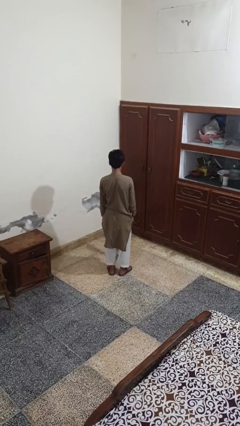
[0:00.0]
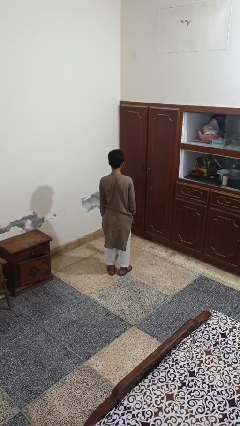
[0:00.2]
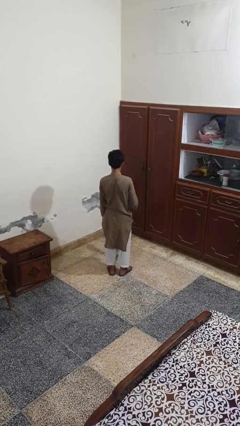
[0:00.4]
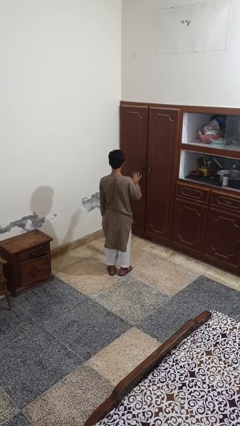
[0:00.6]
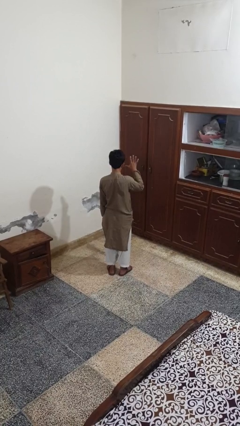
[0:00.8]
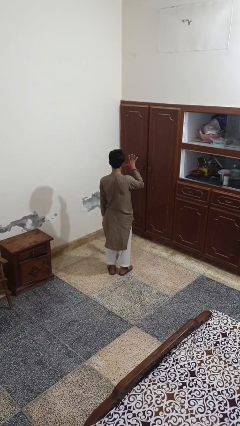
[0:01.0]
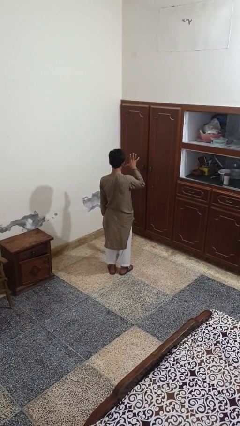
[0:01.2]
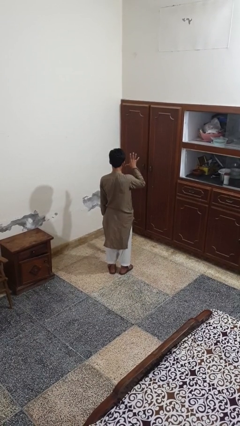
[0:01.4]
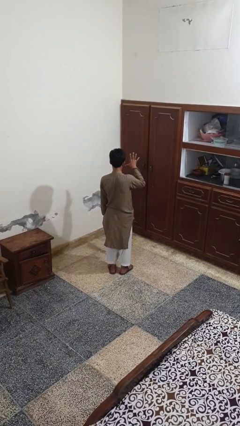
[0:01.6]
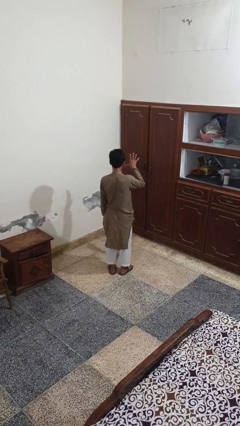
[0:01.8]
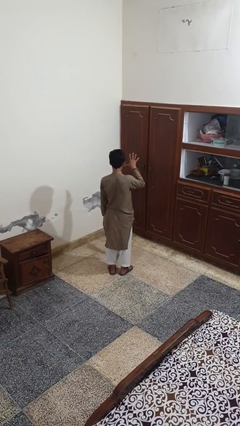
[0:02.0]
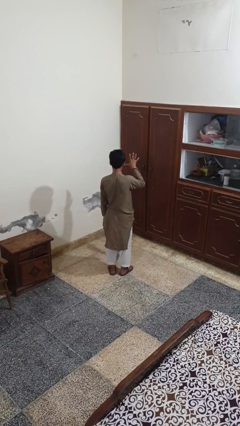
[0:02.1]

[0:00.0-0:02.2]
person gestures number five

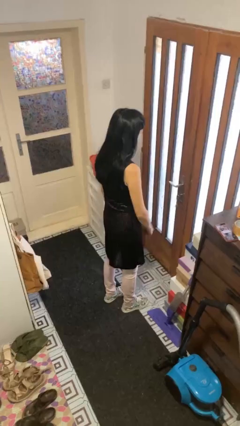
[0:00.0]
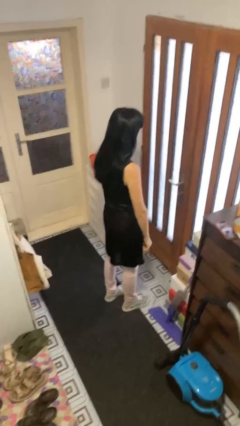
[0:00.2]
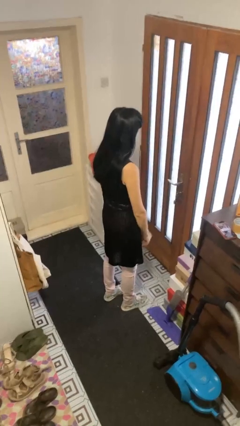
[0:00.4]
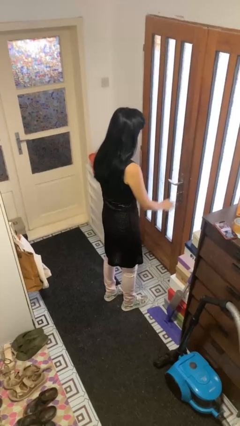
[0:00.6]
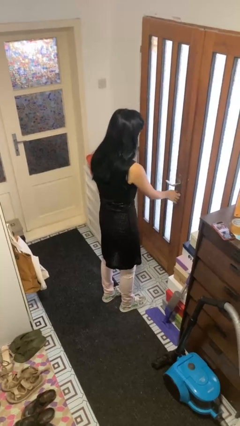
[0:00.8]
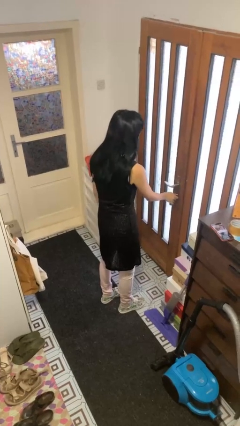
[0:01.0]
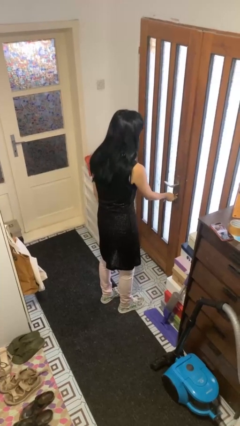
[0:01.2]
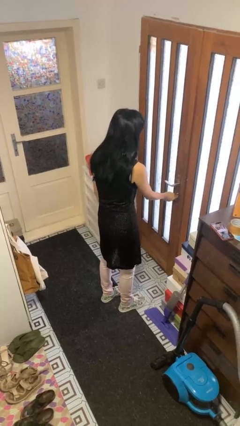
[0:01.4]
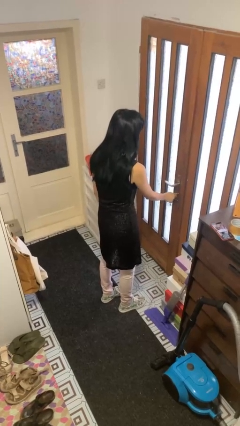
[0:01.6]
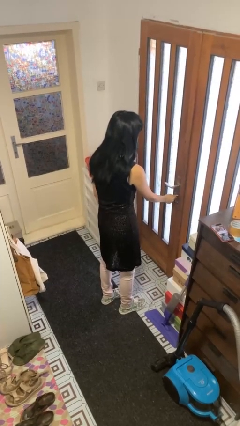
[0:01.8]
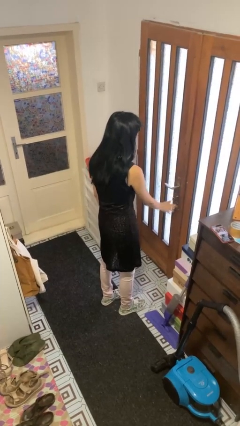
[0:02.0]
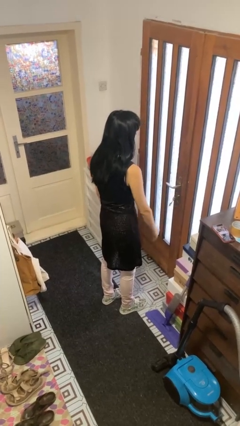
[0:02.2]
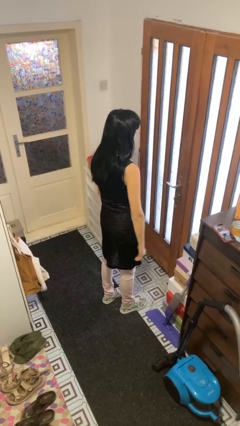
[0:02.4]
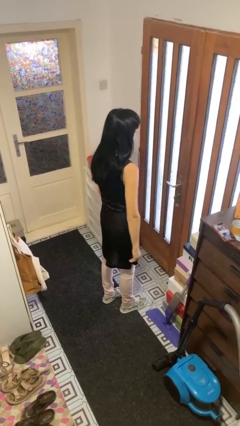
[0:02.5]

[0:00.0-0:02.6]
person locks door with keys

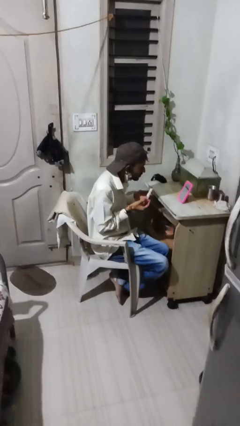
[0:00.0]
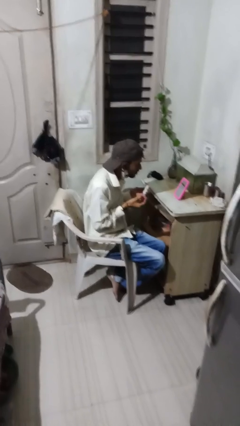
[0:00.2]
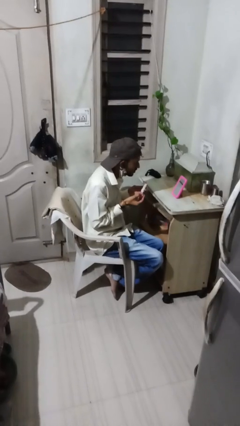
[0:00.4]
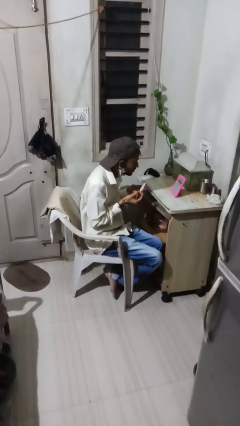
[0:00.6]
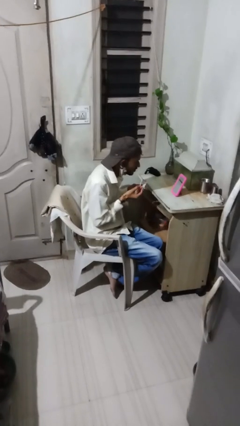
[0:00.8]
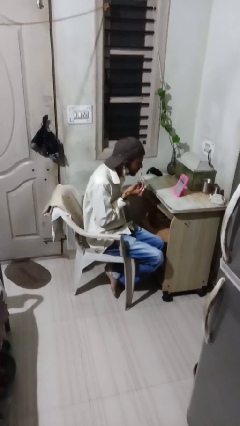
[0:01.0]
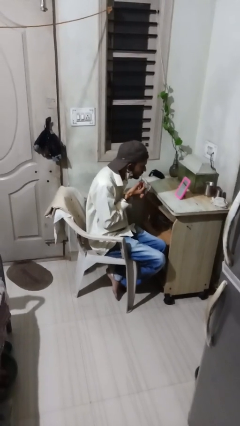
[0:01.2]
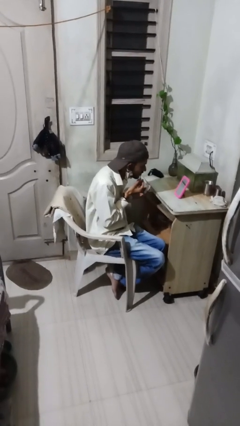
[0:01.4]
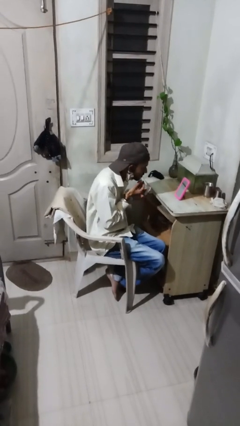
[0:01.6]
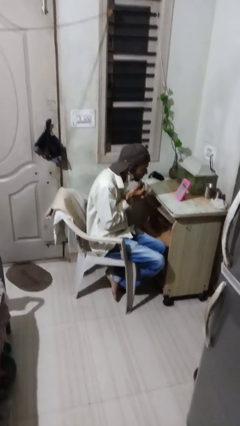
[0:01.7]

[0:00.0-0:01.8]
person applies lip makeup

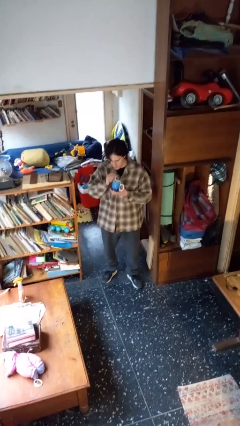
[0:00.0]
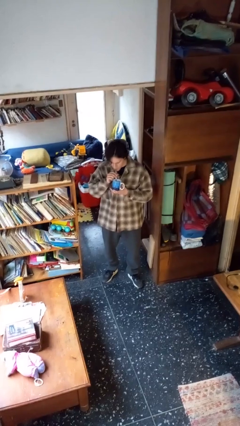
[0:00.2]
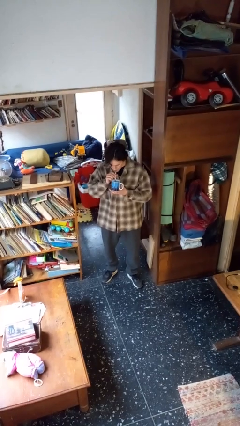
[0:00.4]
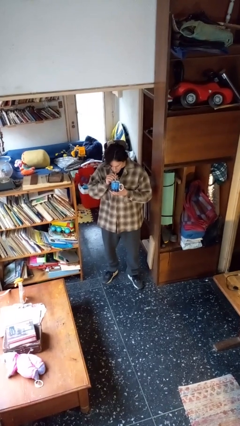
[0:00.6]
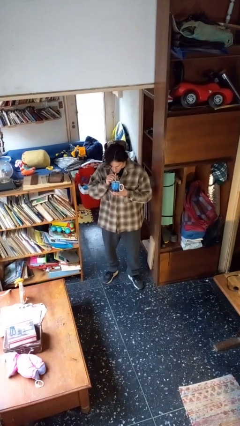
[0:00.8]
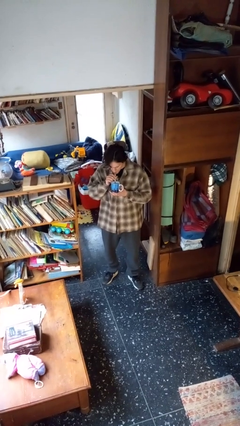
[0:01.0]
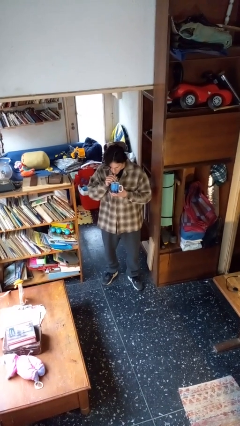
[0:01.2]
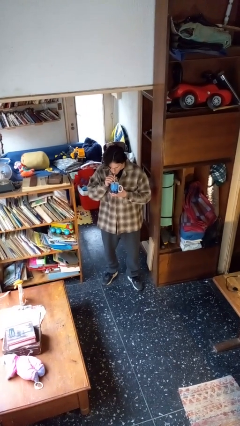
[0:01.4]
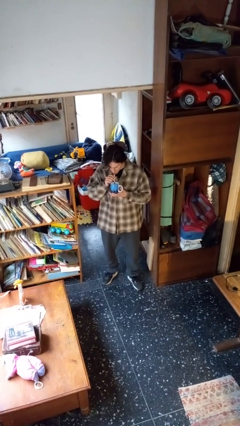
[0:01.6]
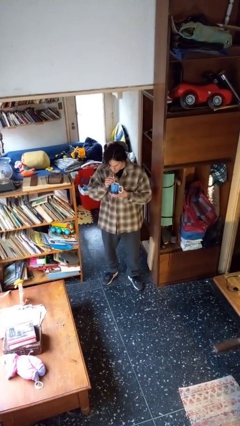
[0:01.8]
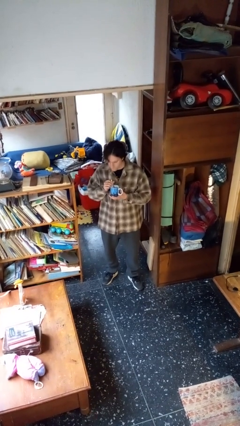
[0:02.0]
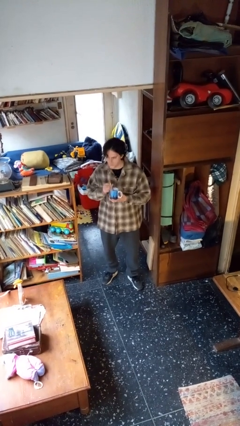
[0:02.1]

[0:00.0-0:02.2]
person drinks from straw

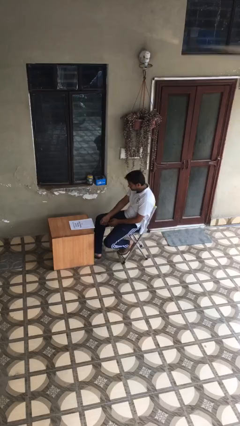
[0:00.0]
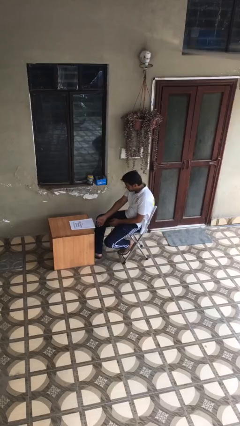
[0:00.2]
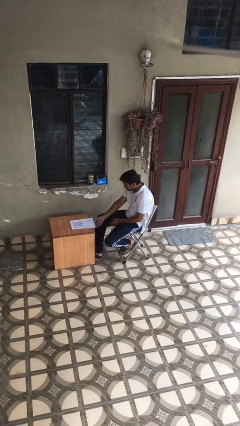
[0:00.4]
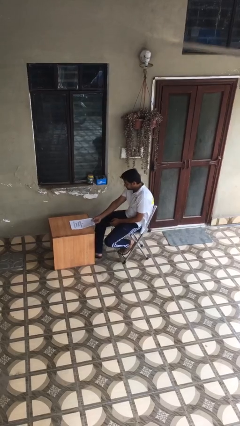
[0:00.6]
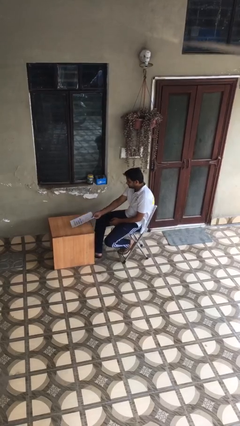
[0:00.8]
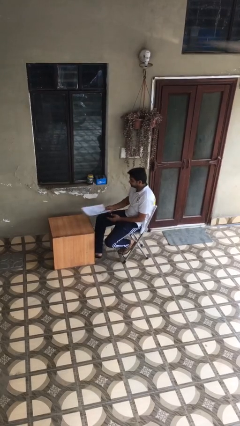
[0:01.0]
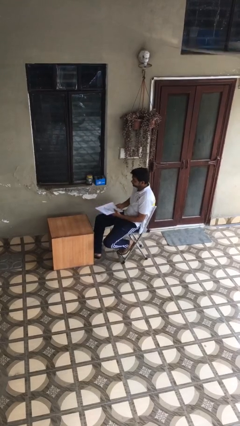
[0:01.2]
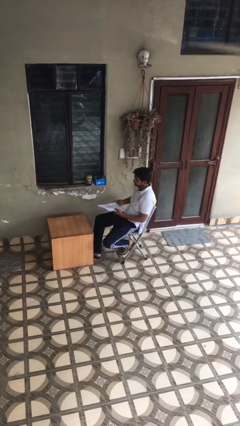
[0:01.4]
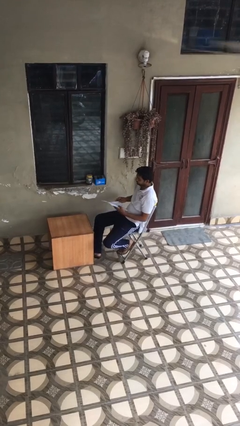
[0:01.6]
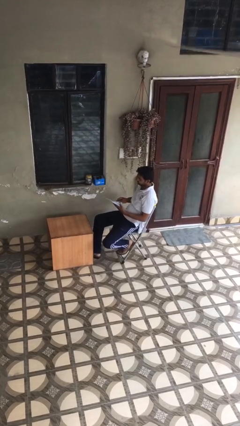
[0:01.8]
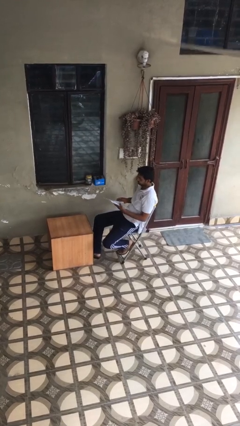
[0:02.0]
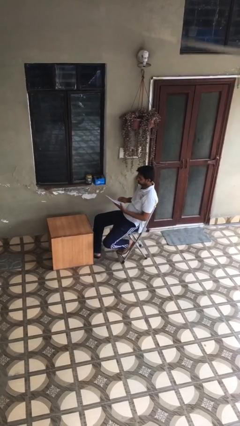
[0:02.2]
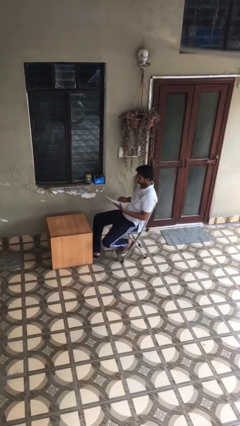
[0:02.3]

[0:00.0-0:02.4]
person picks up object from table

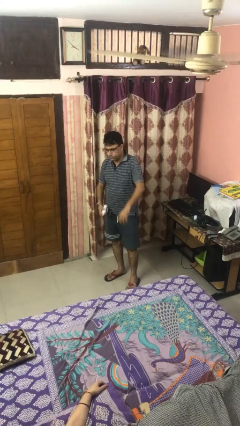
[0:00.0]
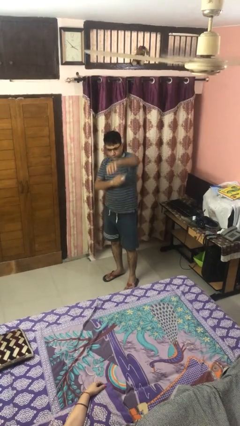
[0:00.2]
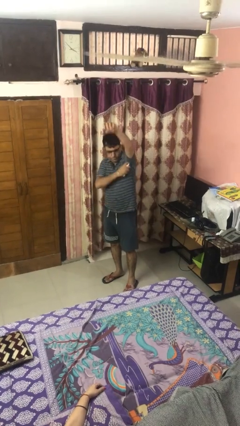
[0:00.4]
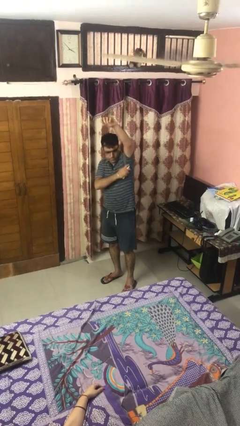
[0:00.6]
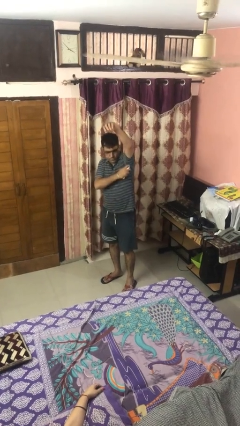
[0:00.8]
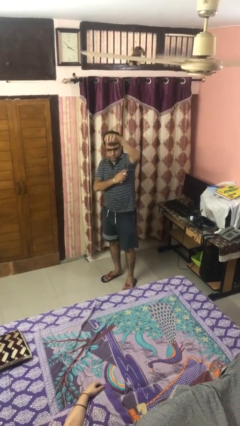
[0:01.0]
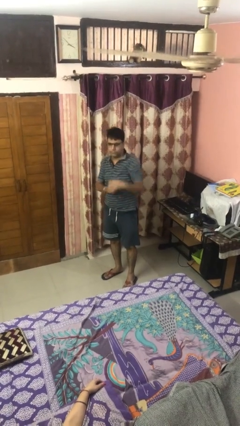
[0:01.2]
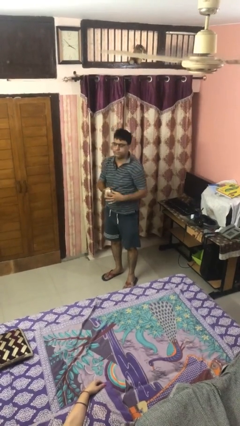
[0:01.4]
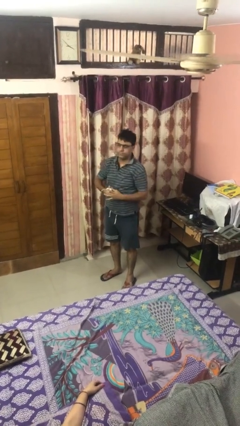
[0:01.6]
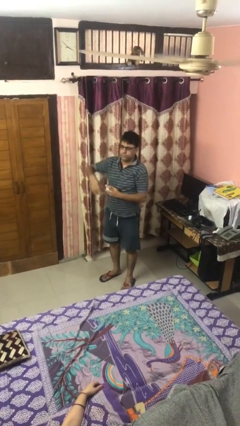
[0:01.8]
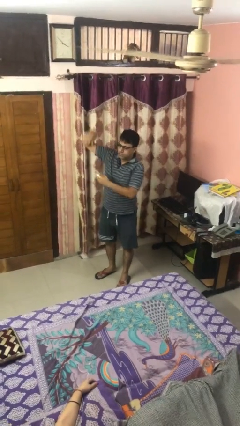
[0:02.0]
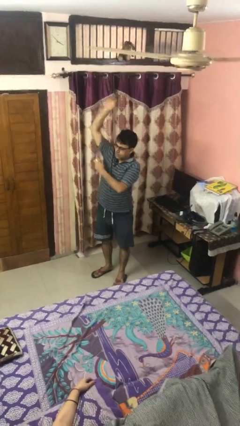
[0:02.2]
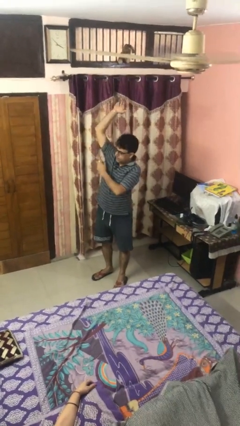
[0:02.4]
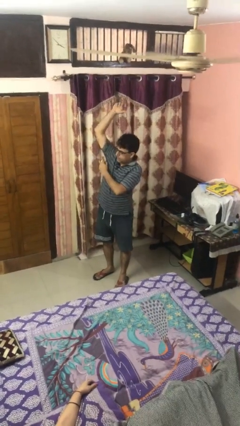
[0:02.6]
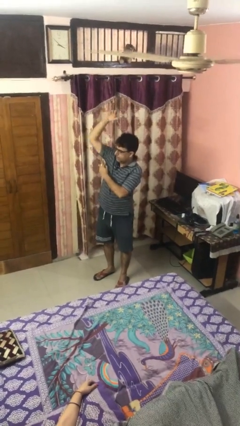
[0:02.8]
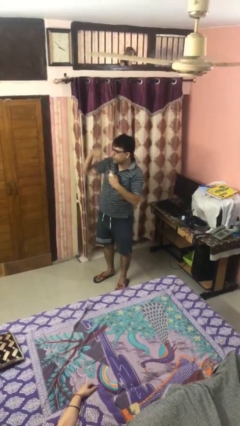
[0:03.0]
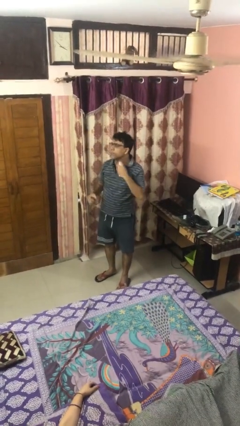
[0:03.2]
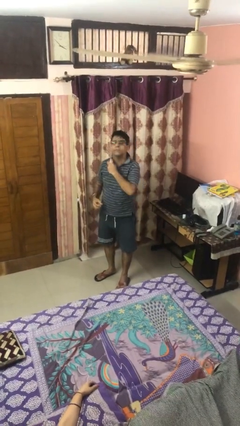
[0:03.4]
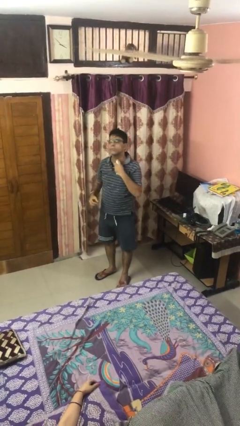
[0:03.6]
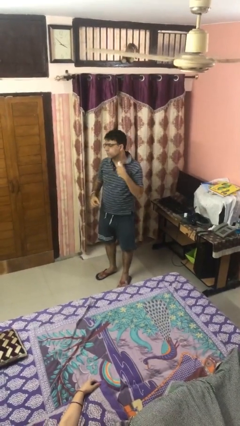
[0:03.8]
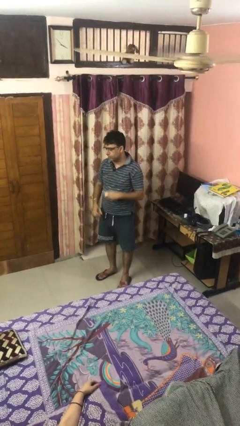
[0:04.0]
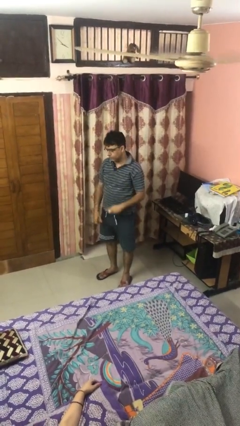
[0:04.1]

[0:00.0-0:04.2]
person applies deodorant

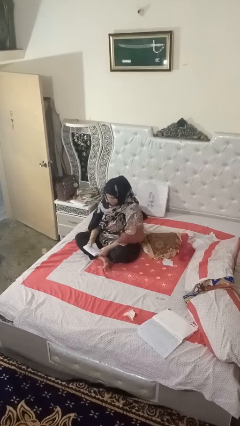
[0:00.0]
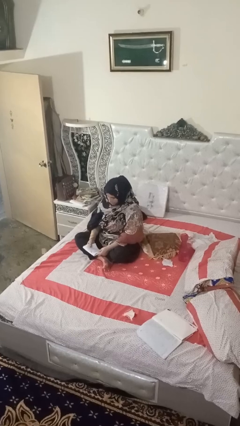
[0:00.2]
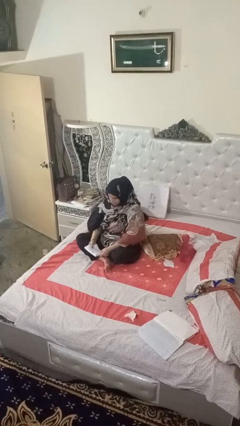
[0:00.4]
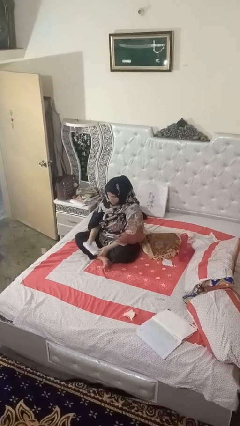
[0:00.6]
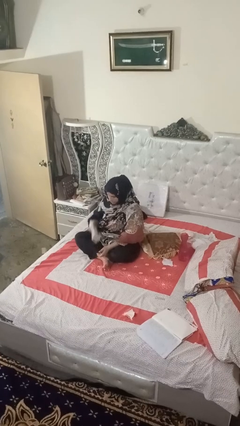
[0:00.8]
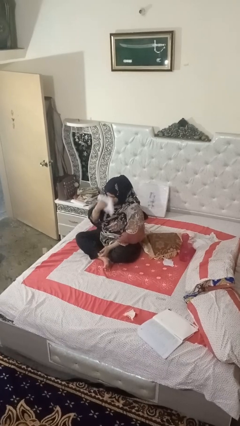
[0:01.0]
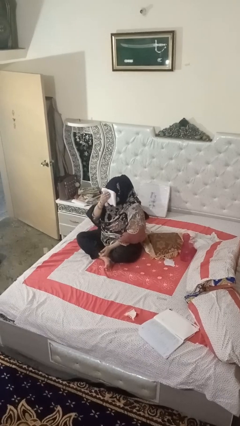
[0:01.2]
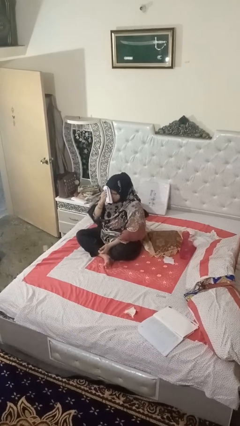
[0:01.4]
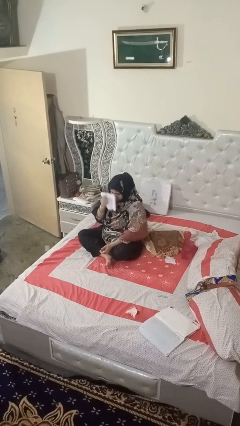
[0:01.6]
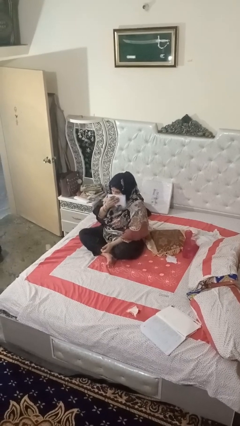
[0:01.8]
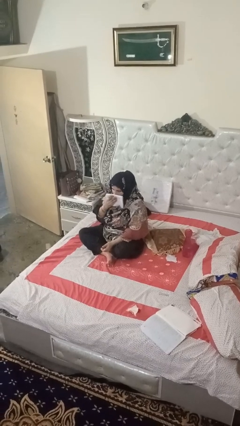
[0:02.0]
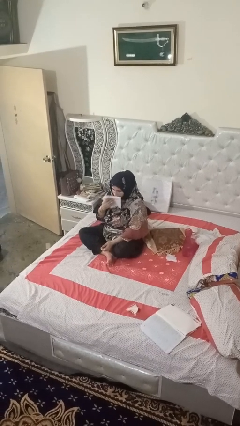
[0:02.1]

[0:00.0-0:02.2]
person wipes mouth with napkin
